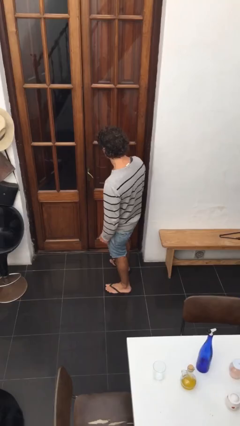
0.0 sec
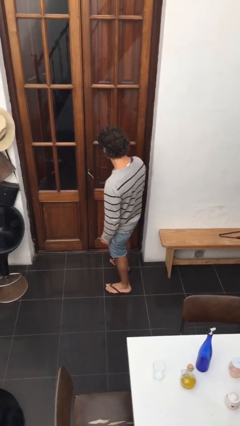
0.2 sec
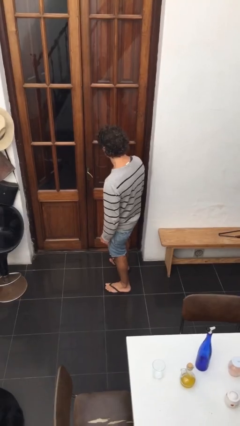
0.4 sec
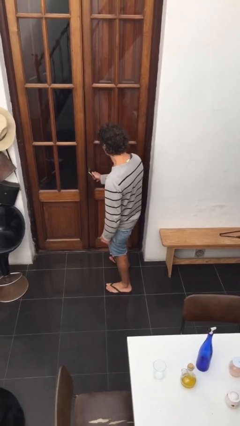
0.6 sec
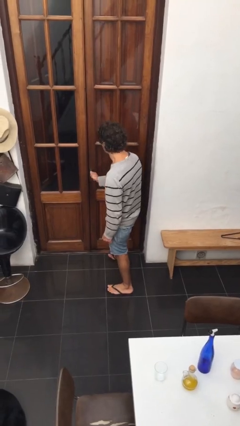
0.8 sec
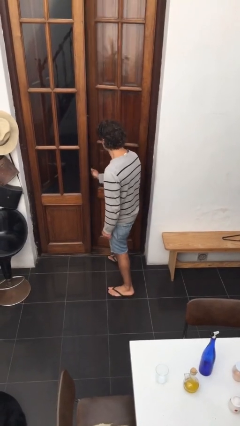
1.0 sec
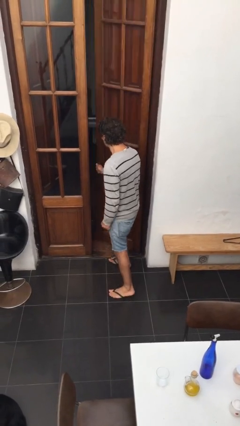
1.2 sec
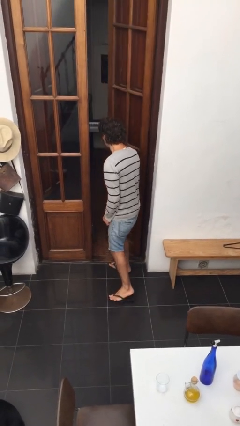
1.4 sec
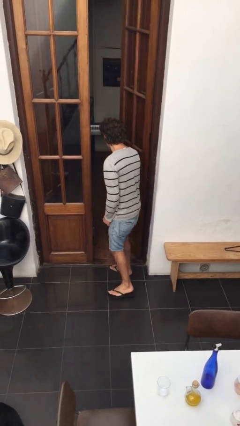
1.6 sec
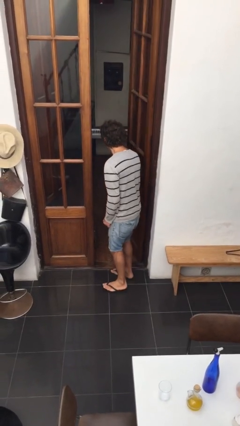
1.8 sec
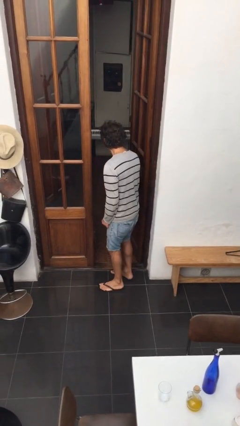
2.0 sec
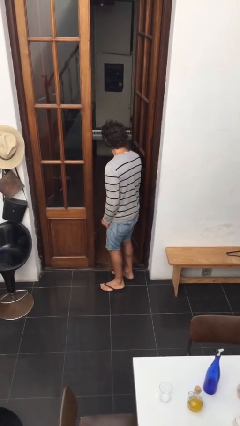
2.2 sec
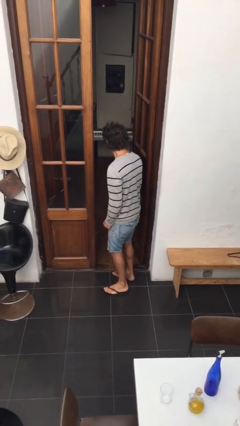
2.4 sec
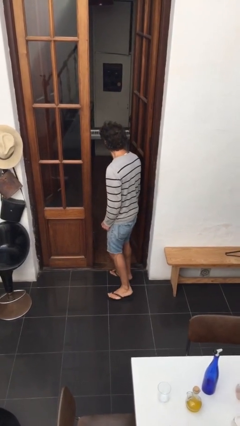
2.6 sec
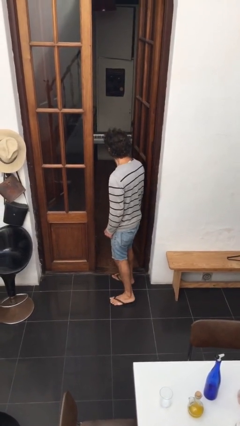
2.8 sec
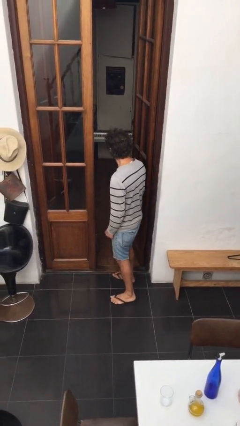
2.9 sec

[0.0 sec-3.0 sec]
person opens facility door

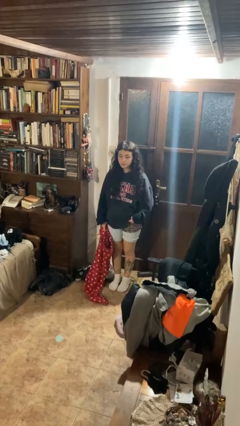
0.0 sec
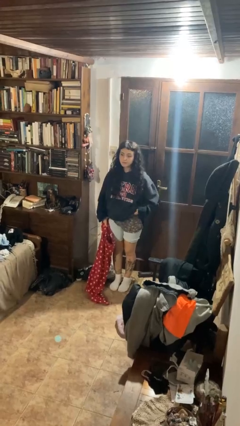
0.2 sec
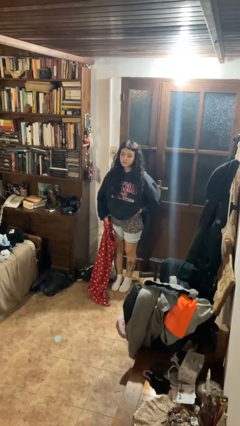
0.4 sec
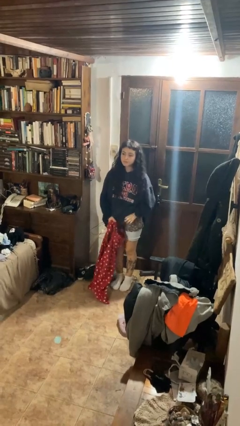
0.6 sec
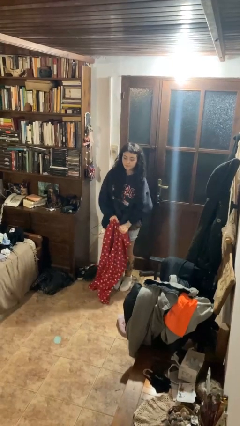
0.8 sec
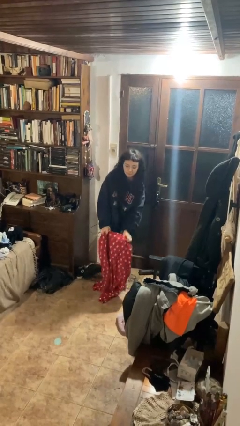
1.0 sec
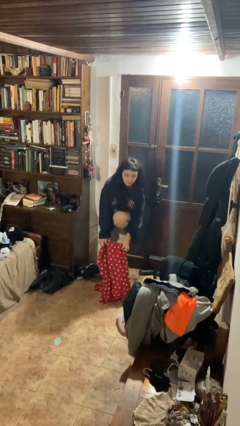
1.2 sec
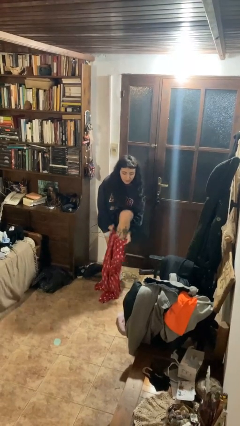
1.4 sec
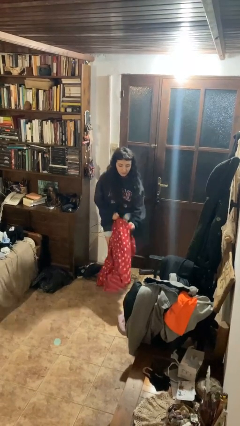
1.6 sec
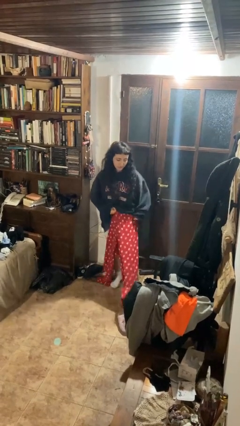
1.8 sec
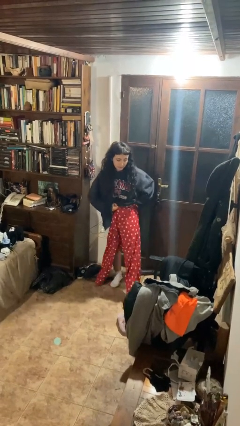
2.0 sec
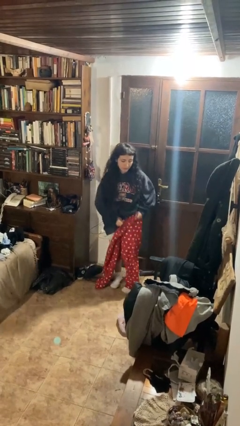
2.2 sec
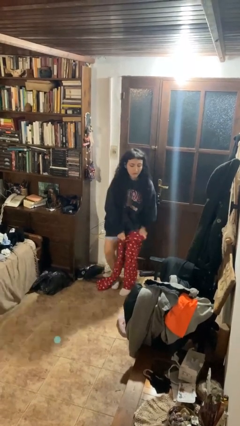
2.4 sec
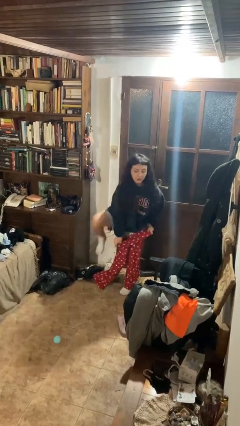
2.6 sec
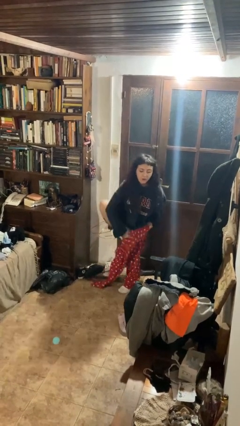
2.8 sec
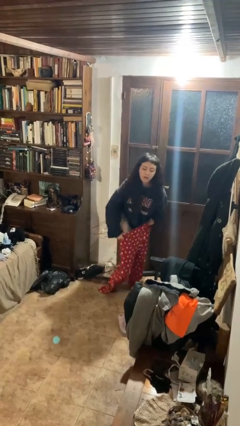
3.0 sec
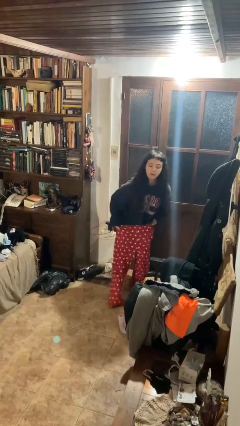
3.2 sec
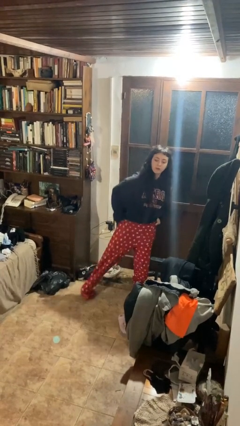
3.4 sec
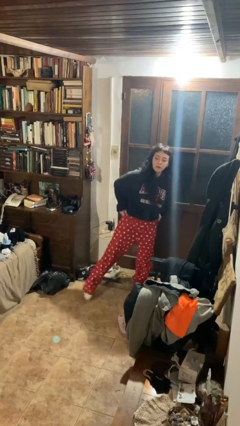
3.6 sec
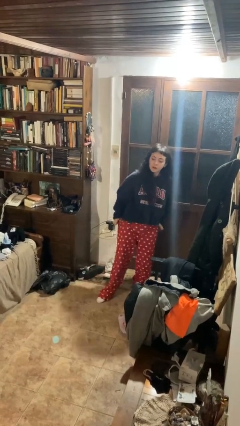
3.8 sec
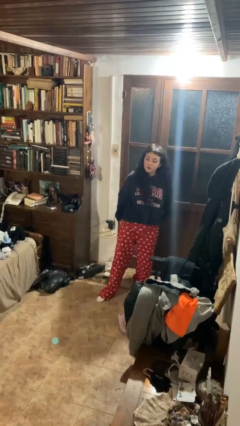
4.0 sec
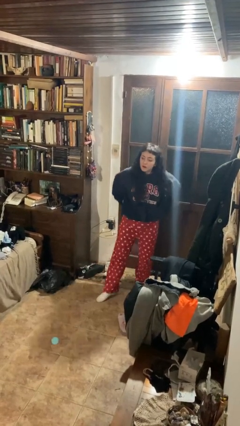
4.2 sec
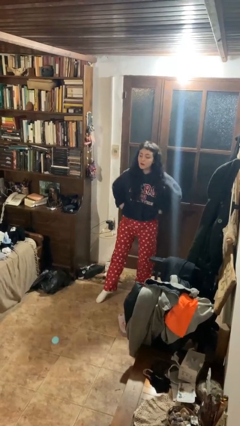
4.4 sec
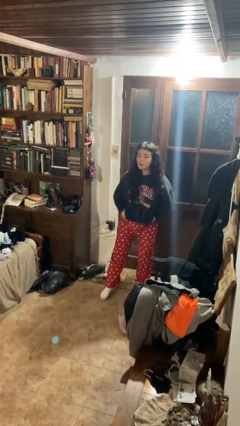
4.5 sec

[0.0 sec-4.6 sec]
person puts on pants

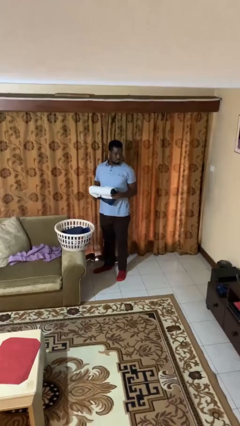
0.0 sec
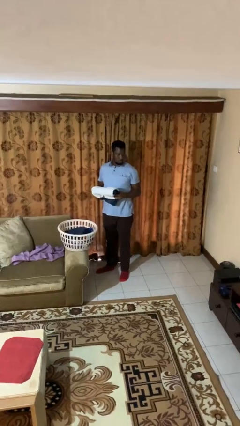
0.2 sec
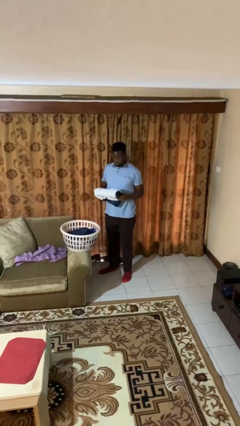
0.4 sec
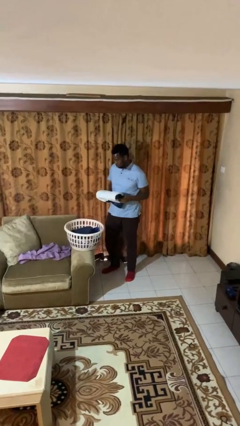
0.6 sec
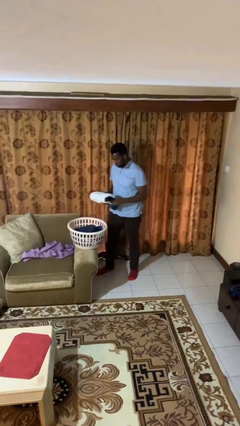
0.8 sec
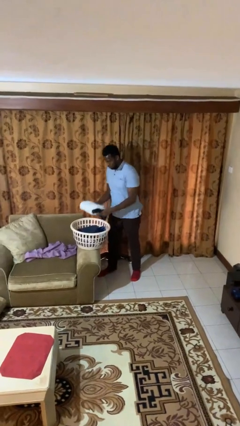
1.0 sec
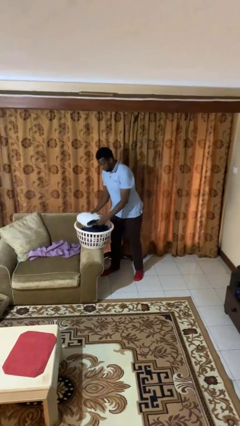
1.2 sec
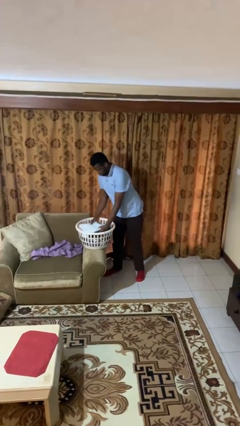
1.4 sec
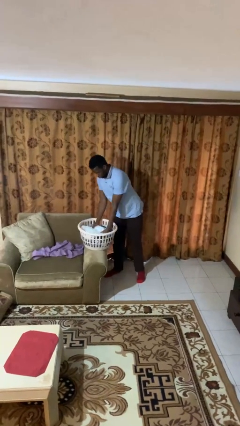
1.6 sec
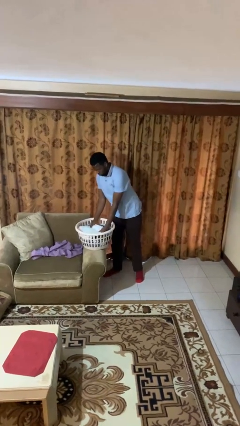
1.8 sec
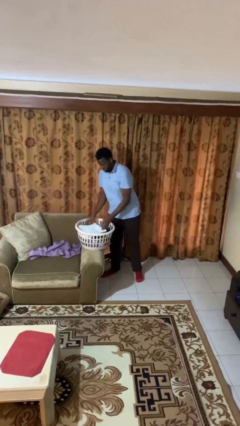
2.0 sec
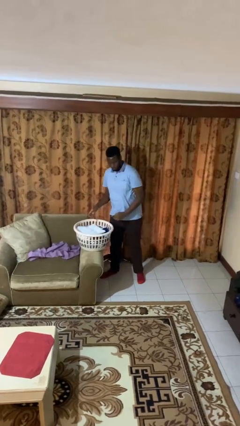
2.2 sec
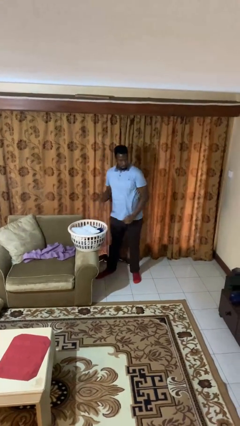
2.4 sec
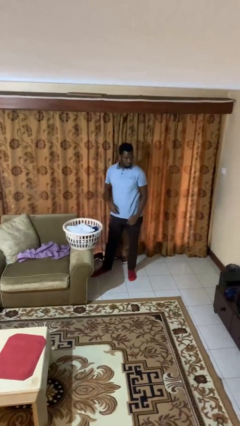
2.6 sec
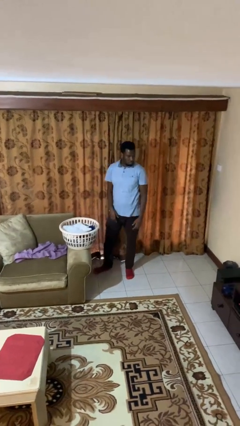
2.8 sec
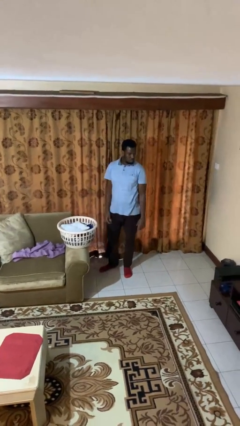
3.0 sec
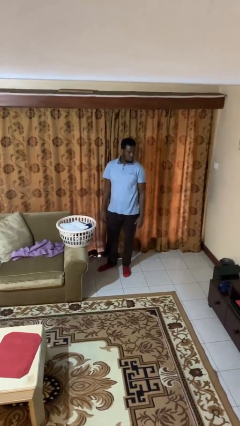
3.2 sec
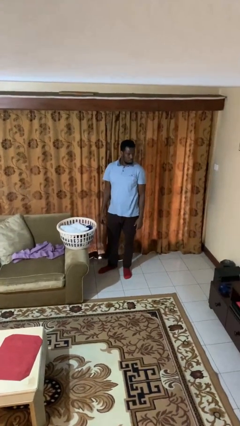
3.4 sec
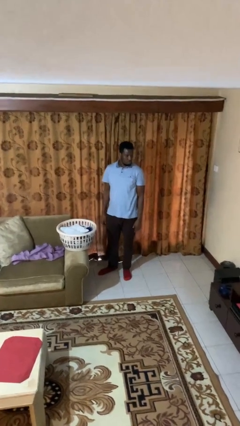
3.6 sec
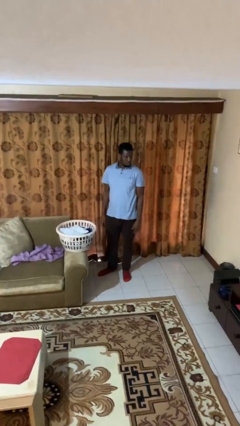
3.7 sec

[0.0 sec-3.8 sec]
person puts object into basket

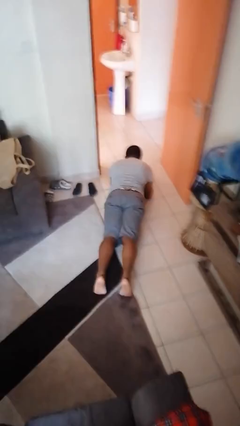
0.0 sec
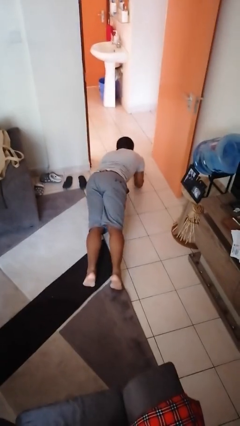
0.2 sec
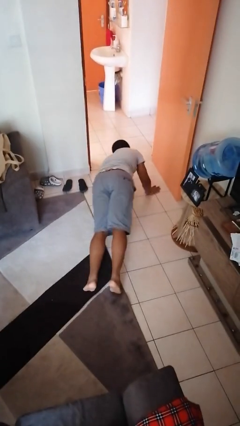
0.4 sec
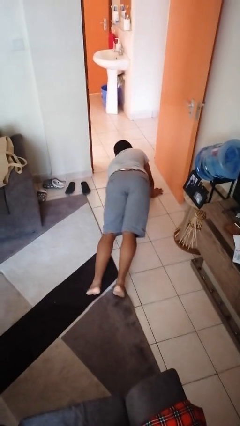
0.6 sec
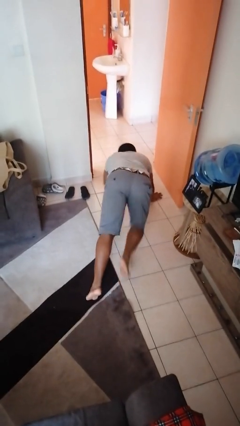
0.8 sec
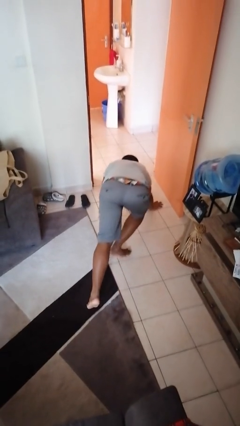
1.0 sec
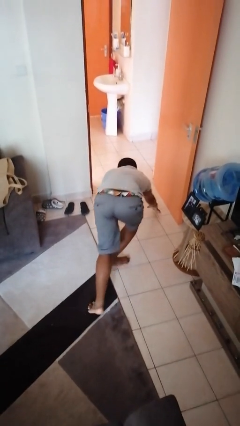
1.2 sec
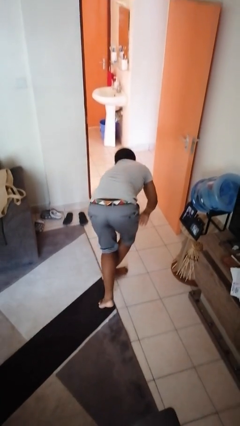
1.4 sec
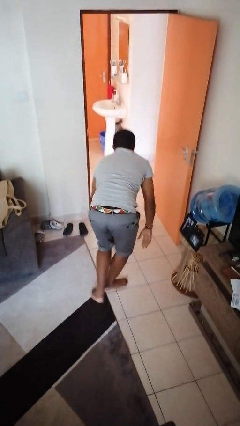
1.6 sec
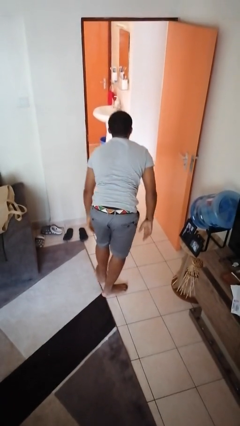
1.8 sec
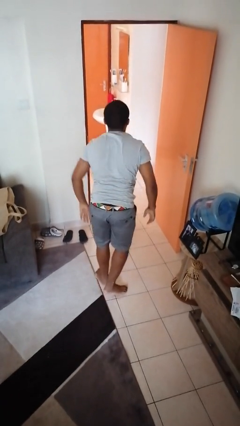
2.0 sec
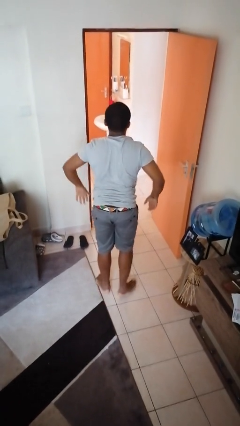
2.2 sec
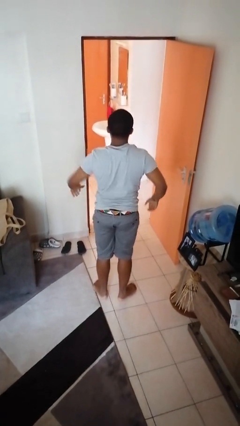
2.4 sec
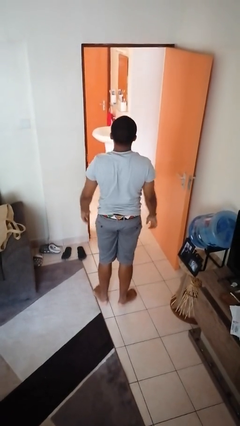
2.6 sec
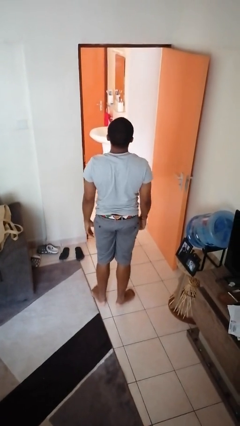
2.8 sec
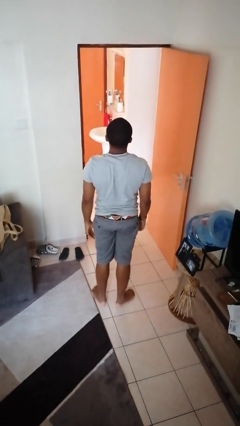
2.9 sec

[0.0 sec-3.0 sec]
person stands up from floor

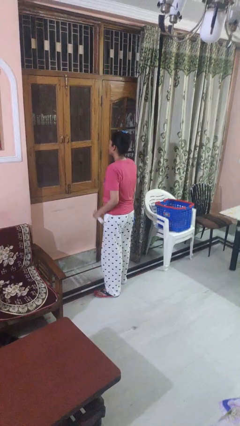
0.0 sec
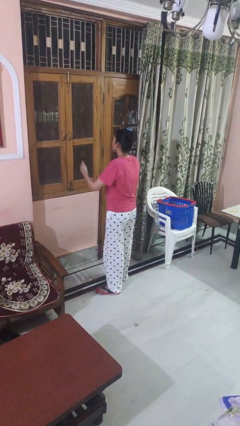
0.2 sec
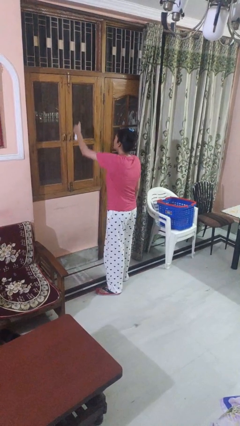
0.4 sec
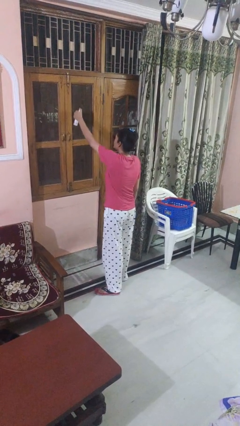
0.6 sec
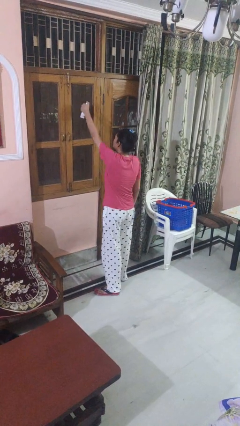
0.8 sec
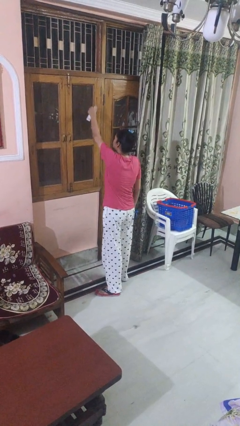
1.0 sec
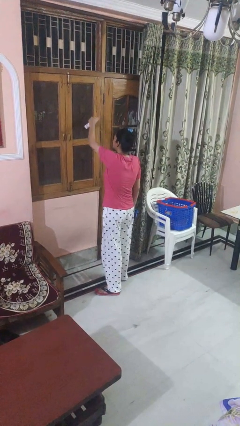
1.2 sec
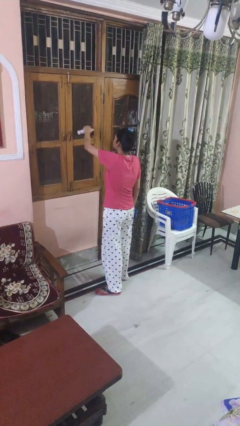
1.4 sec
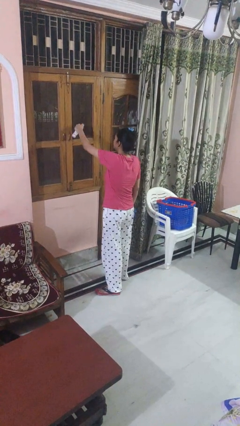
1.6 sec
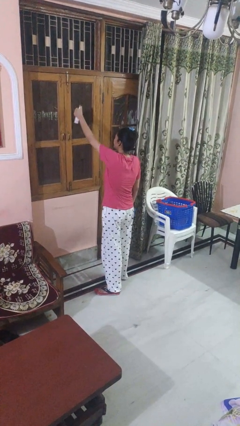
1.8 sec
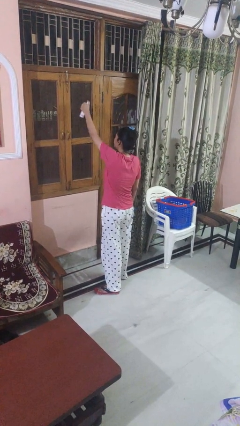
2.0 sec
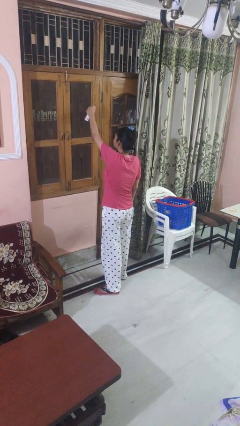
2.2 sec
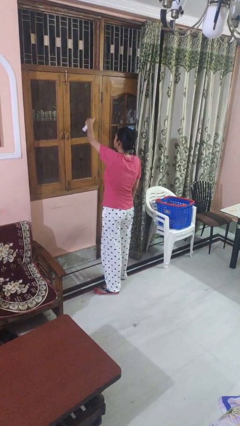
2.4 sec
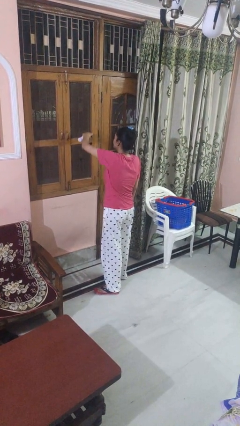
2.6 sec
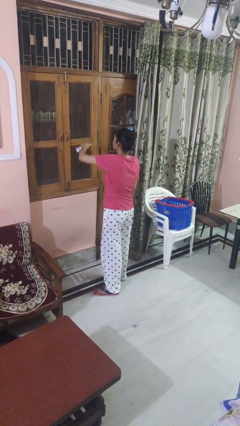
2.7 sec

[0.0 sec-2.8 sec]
person sprays from bottle

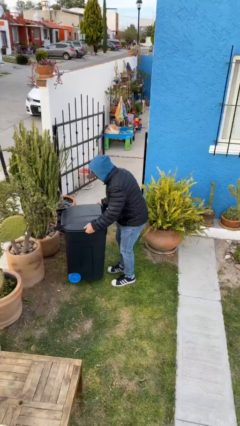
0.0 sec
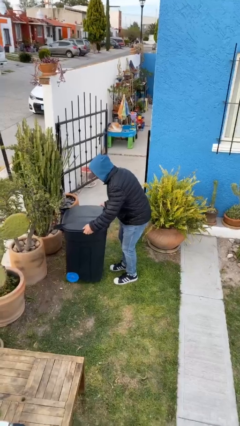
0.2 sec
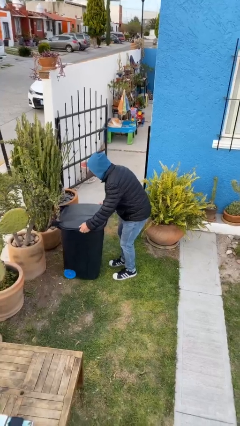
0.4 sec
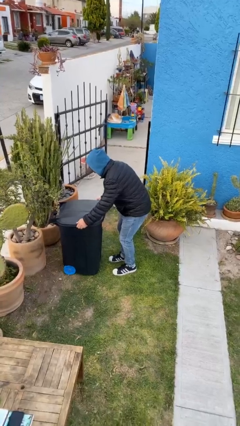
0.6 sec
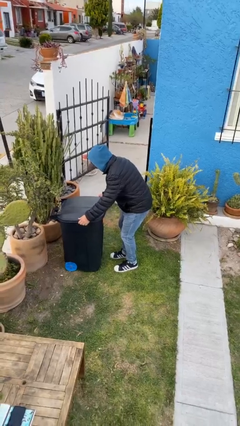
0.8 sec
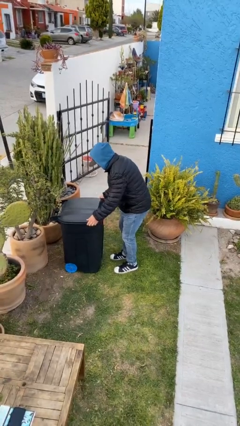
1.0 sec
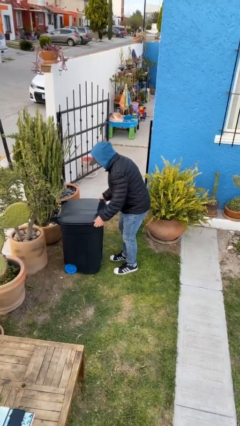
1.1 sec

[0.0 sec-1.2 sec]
person puts down object on floor
